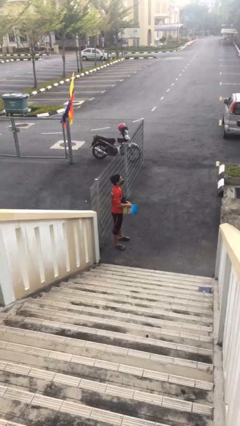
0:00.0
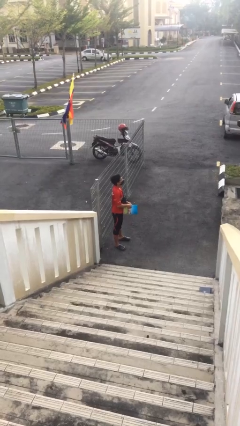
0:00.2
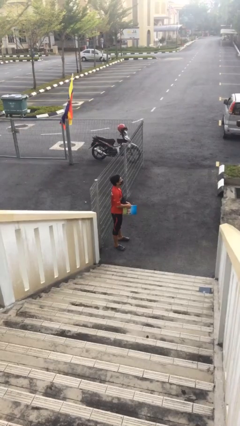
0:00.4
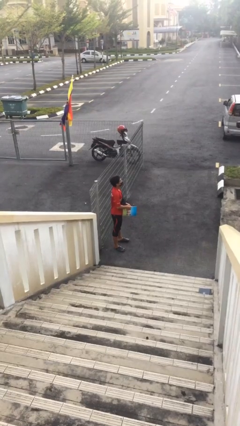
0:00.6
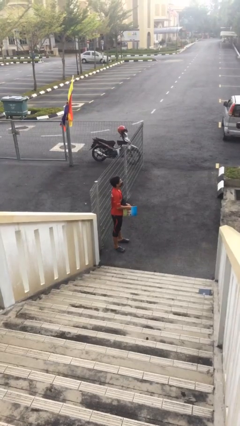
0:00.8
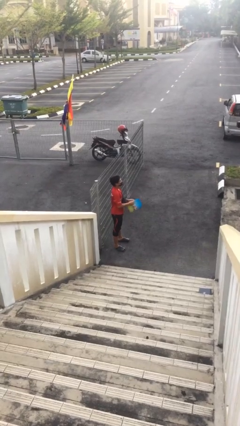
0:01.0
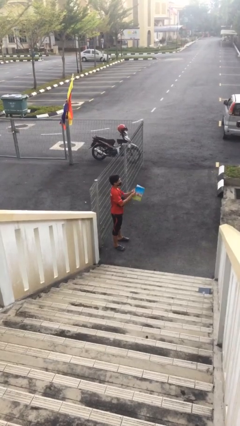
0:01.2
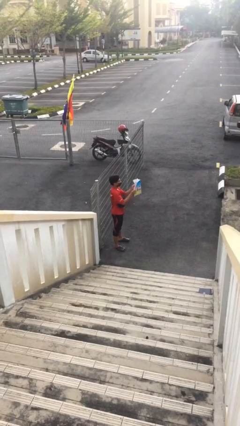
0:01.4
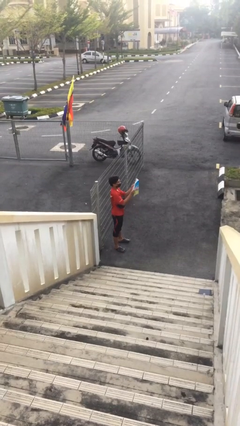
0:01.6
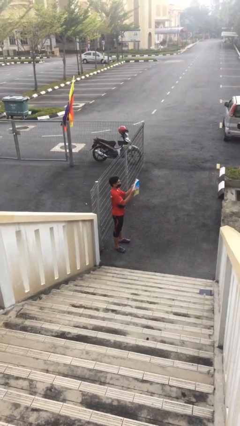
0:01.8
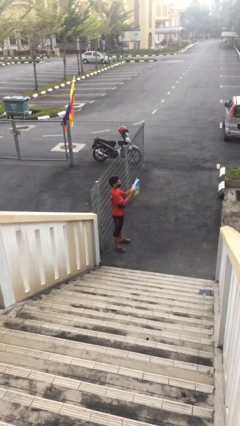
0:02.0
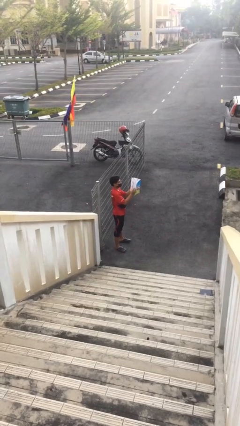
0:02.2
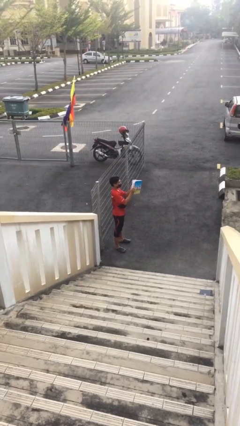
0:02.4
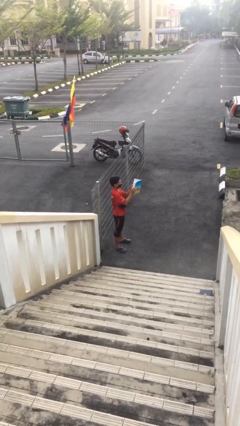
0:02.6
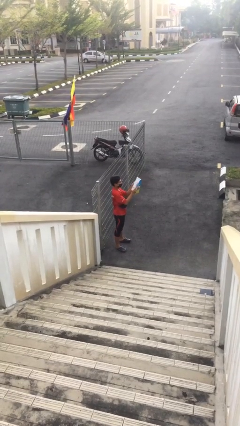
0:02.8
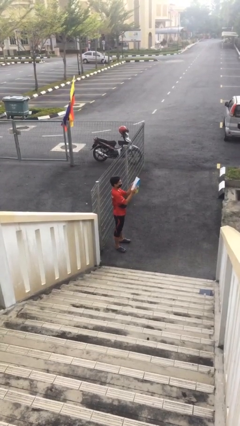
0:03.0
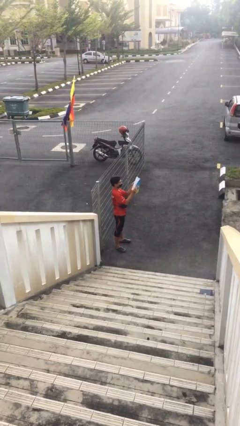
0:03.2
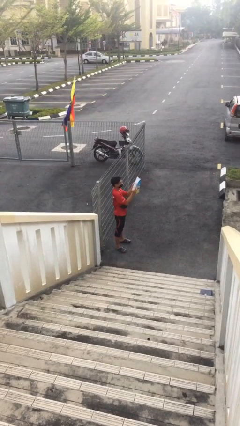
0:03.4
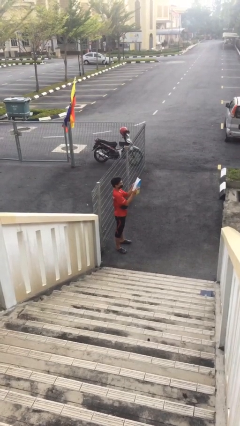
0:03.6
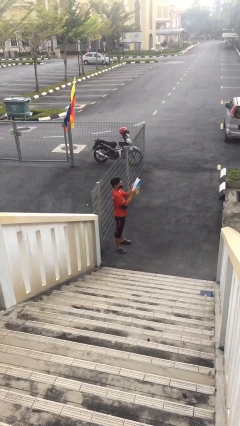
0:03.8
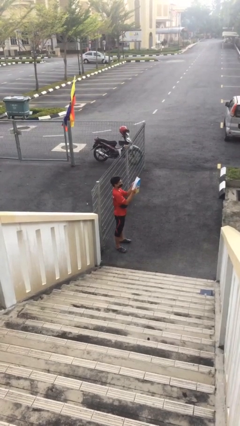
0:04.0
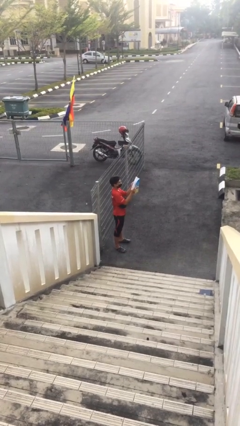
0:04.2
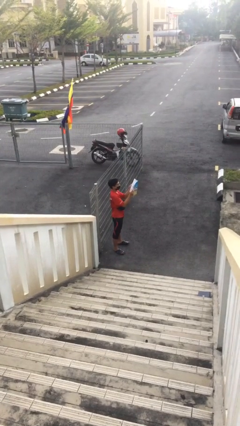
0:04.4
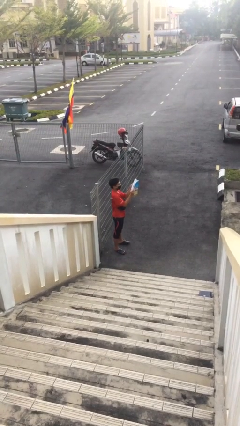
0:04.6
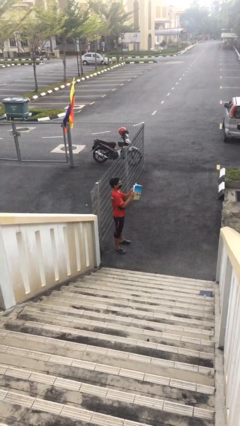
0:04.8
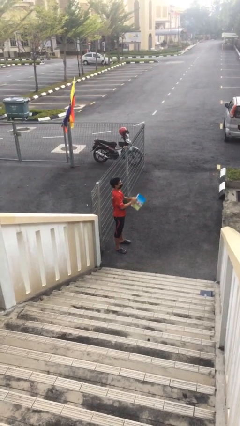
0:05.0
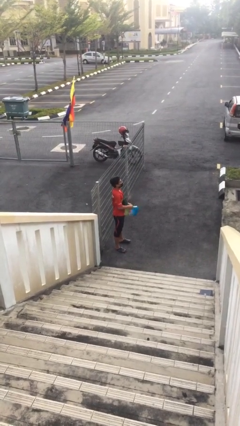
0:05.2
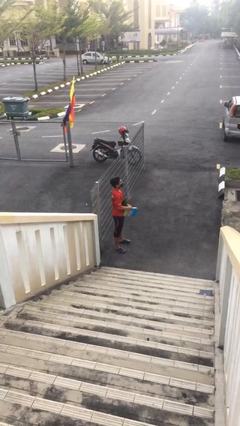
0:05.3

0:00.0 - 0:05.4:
person reads document

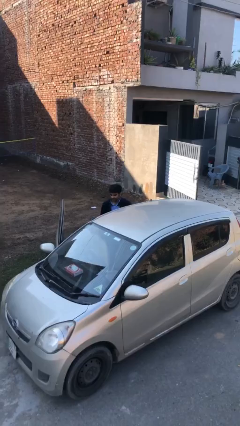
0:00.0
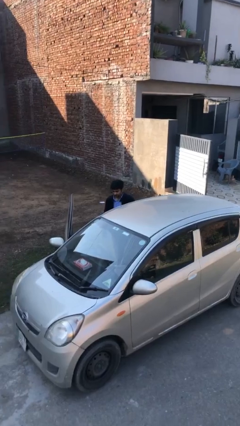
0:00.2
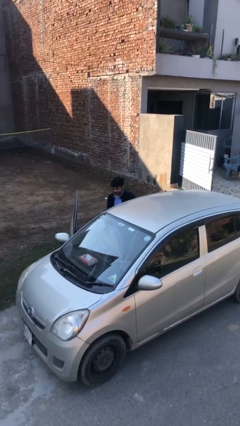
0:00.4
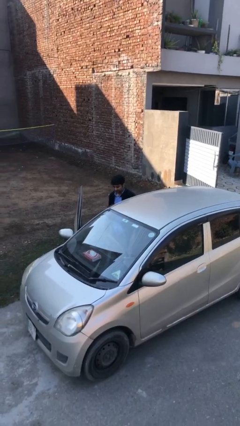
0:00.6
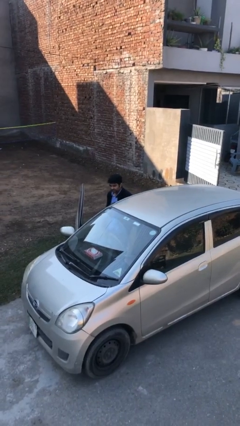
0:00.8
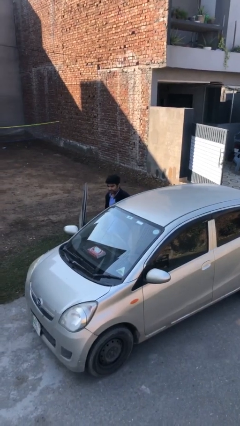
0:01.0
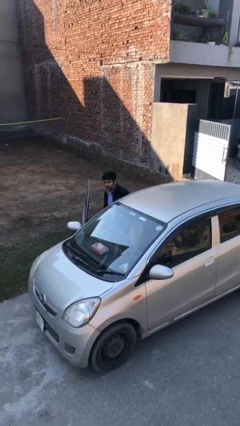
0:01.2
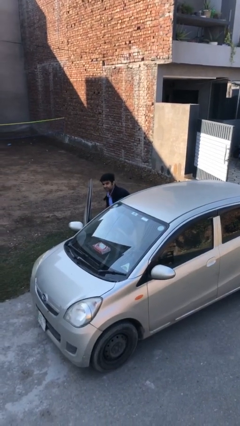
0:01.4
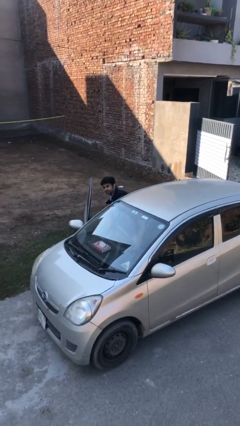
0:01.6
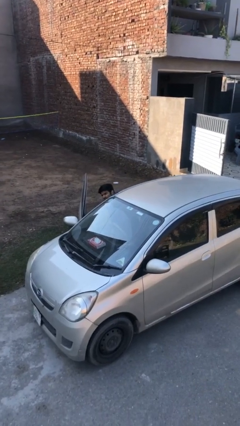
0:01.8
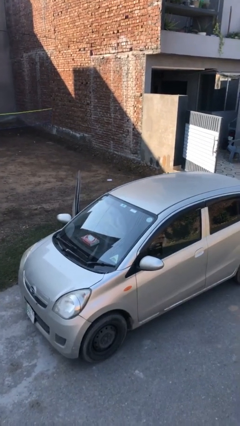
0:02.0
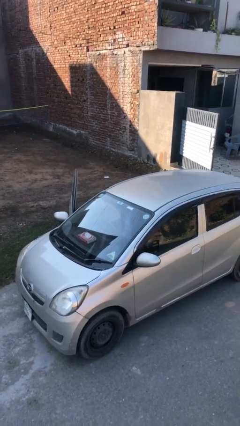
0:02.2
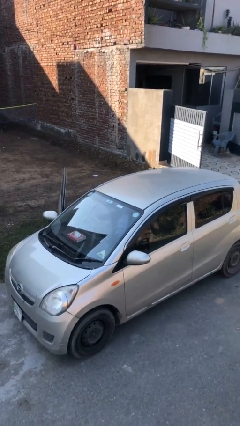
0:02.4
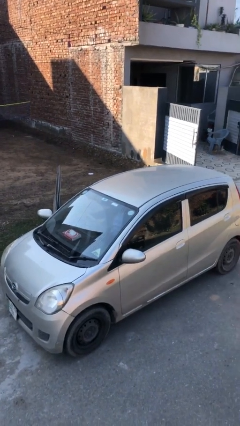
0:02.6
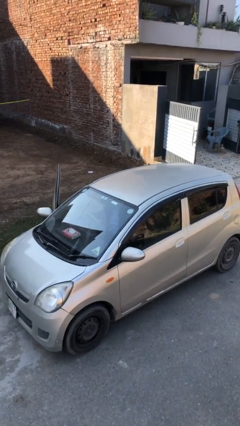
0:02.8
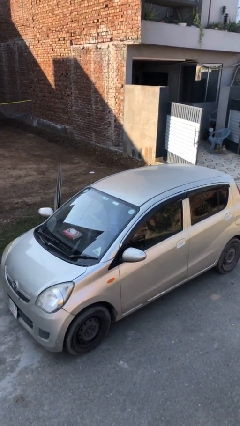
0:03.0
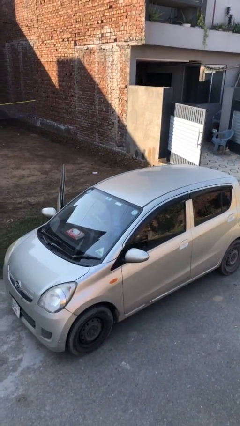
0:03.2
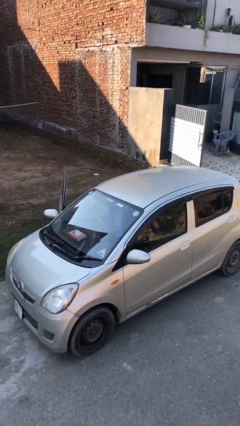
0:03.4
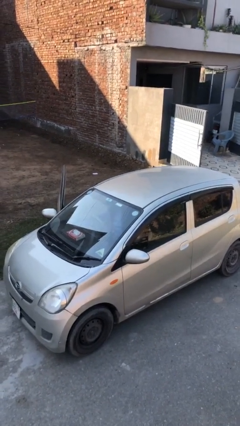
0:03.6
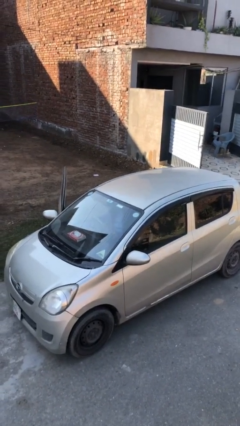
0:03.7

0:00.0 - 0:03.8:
person enters car

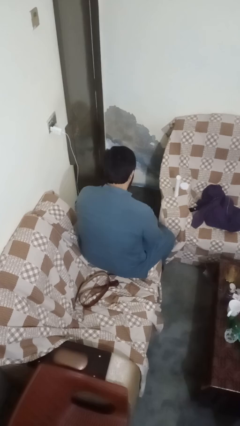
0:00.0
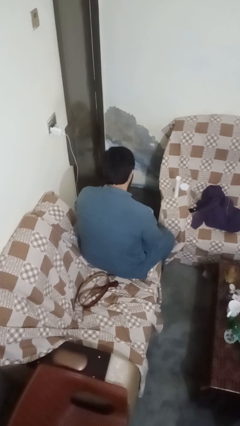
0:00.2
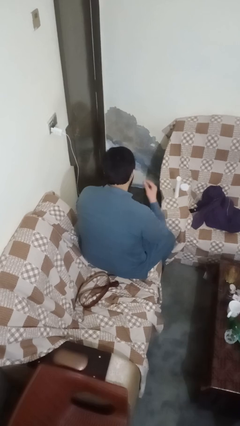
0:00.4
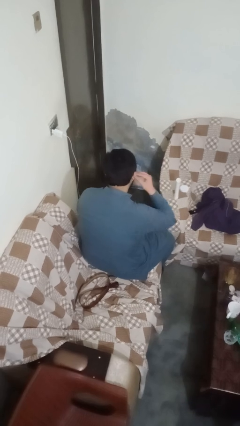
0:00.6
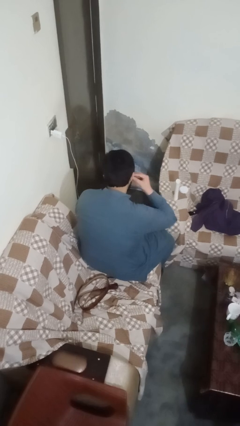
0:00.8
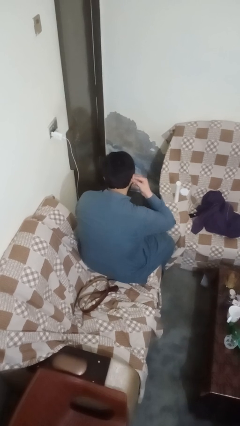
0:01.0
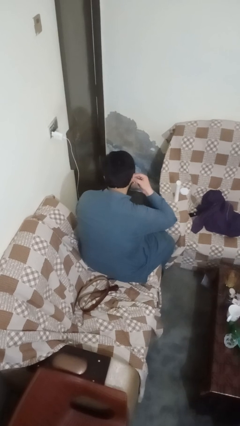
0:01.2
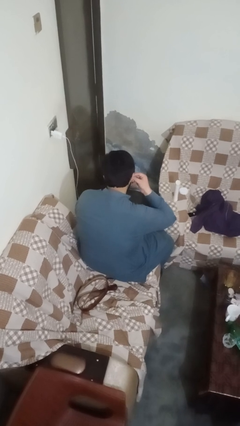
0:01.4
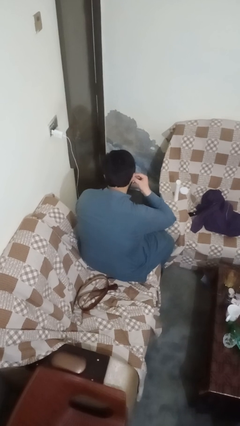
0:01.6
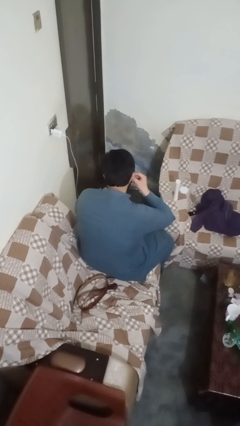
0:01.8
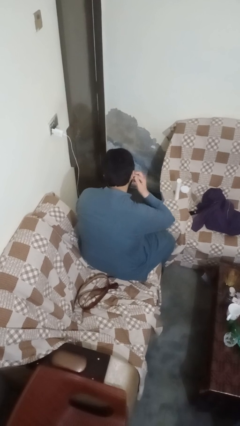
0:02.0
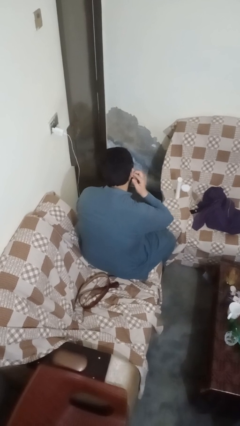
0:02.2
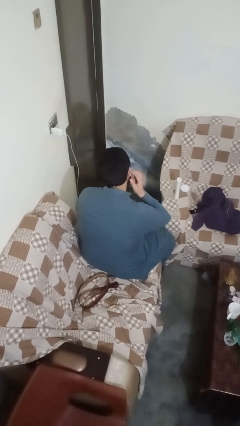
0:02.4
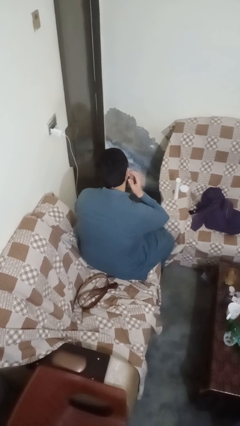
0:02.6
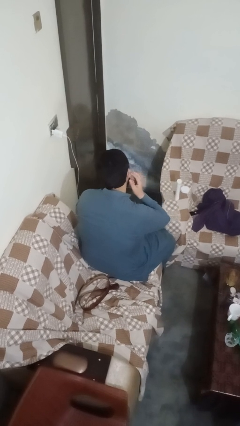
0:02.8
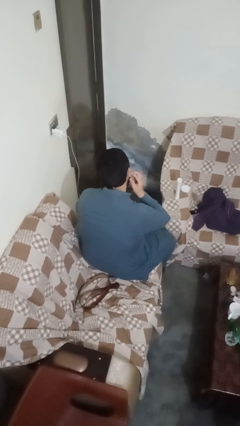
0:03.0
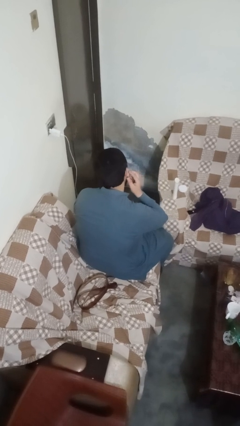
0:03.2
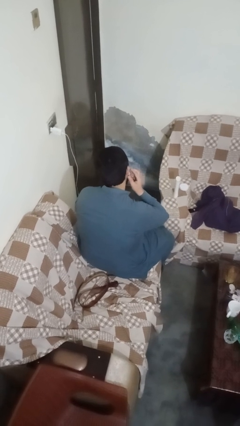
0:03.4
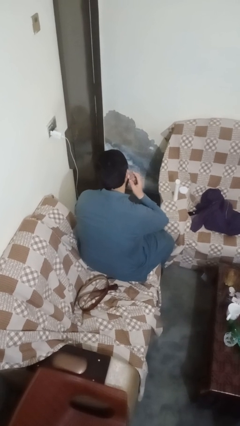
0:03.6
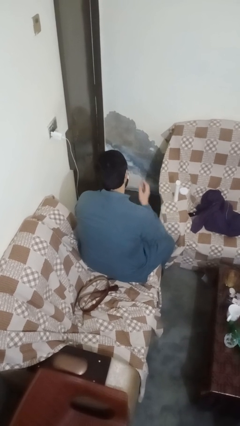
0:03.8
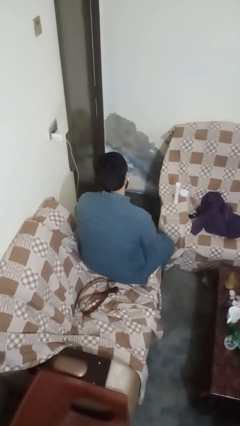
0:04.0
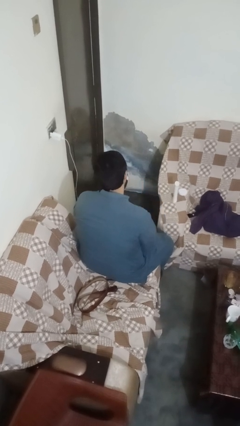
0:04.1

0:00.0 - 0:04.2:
person puts on earrings

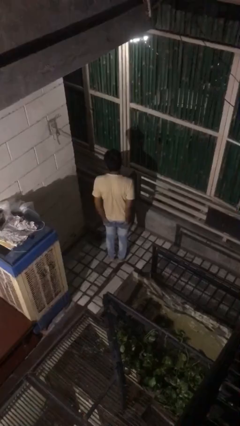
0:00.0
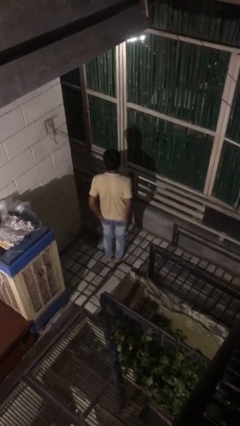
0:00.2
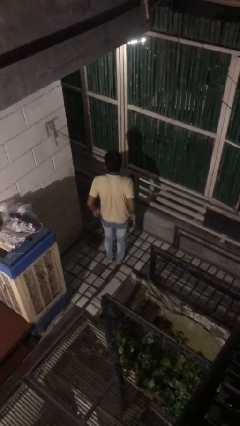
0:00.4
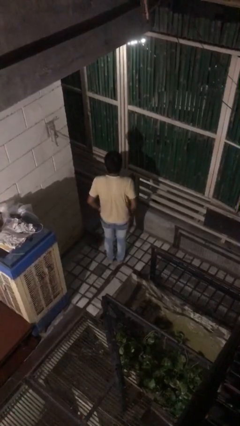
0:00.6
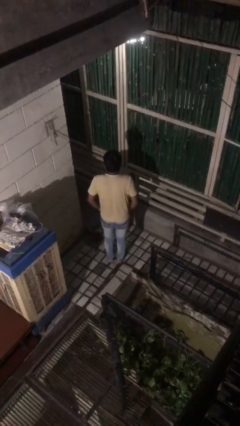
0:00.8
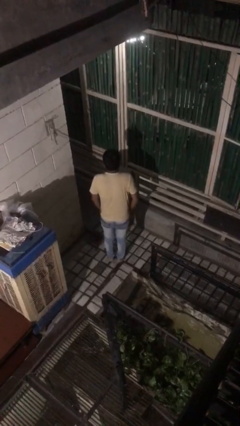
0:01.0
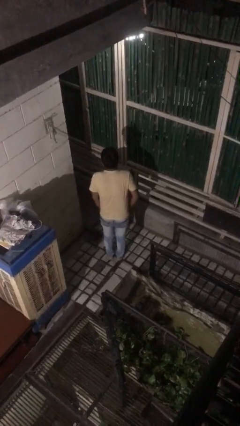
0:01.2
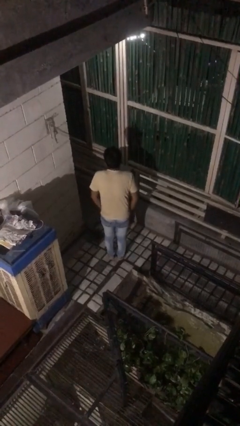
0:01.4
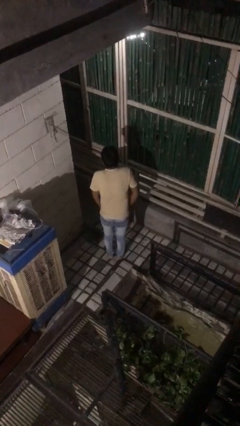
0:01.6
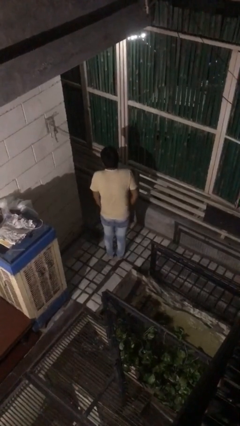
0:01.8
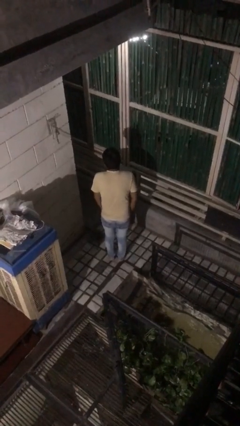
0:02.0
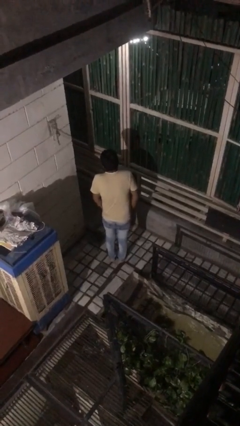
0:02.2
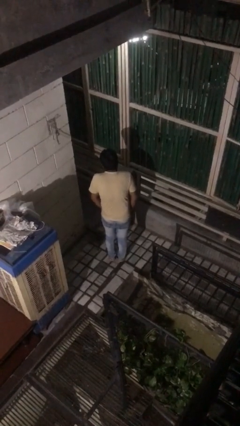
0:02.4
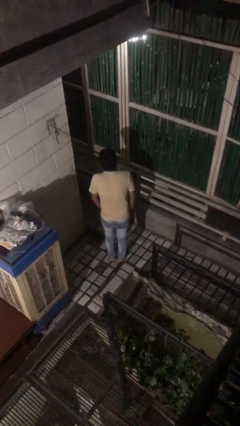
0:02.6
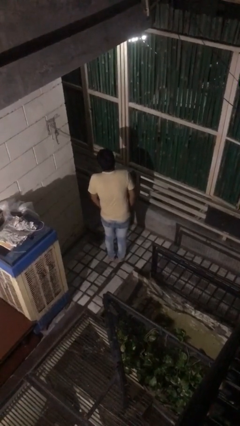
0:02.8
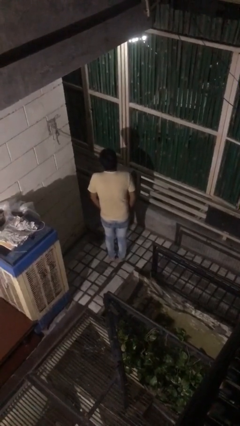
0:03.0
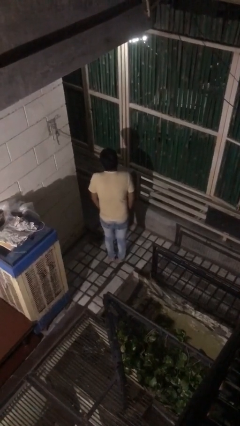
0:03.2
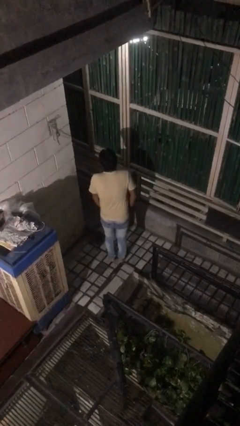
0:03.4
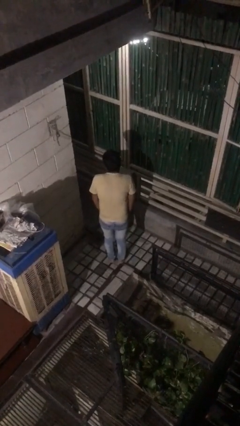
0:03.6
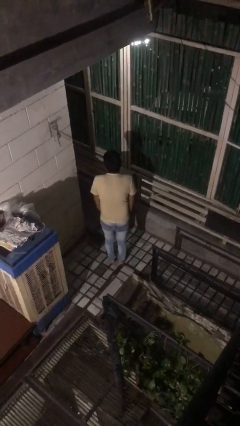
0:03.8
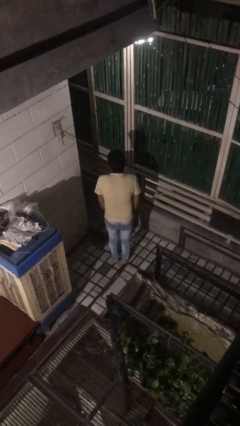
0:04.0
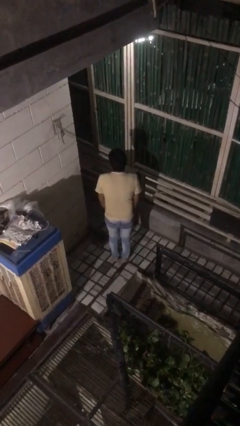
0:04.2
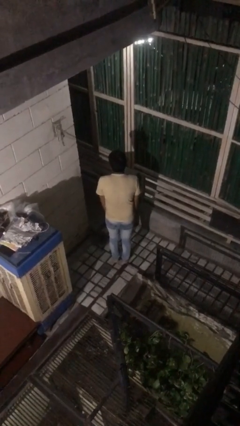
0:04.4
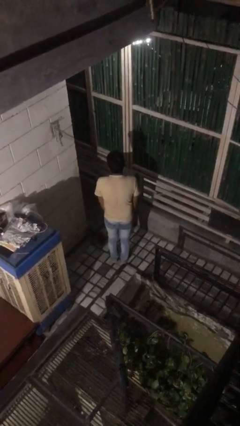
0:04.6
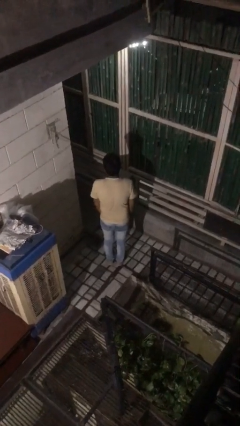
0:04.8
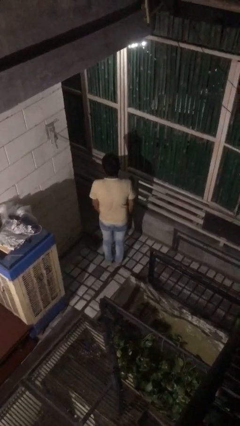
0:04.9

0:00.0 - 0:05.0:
person puts hands in back pockets
